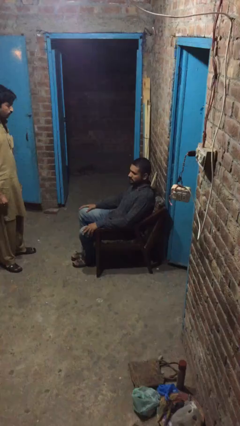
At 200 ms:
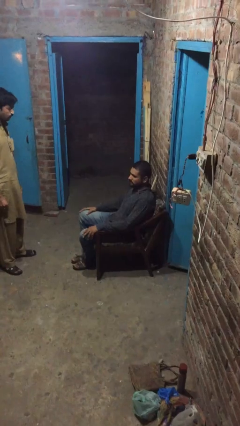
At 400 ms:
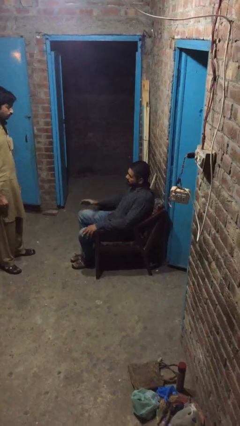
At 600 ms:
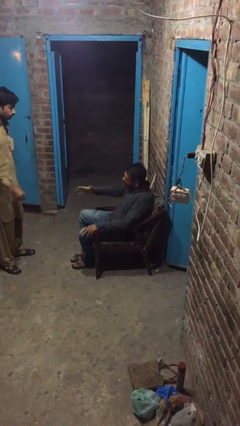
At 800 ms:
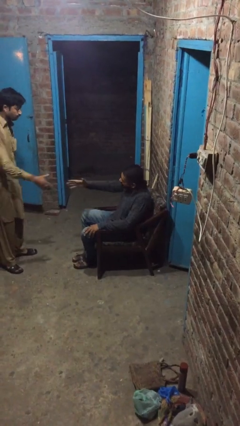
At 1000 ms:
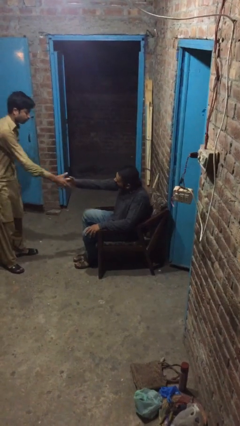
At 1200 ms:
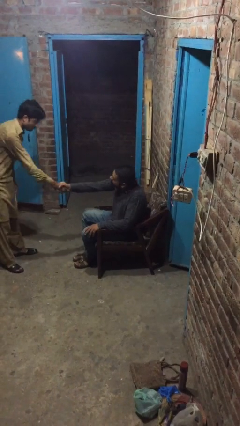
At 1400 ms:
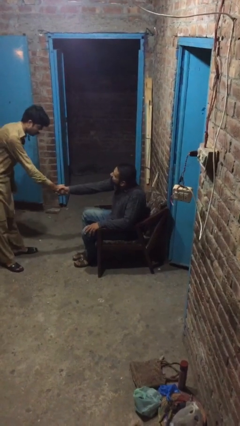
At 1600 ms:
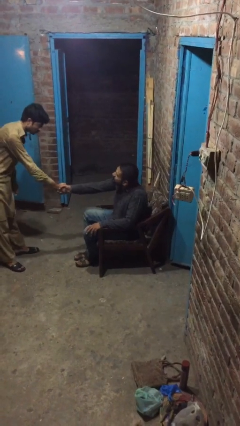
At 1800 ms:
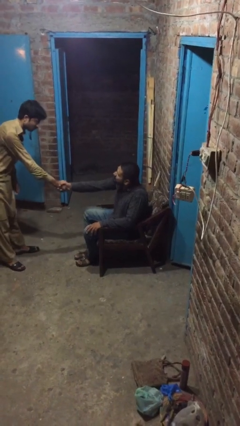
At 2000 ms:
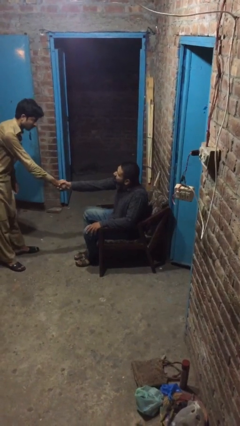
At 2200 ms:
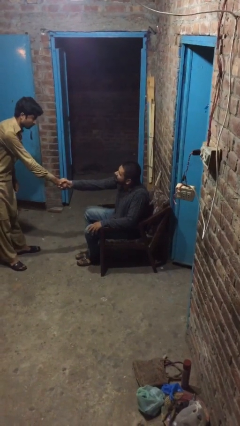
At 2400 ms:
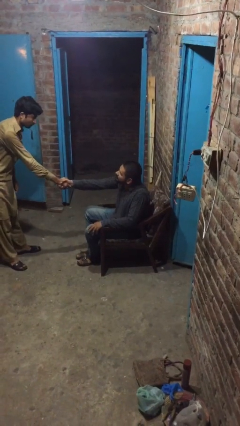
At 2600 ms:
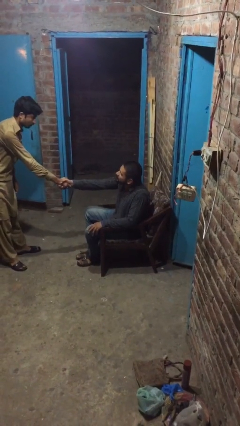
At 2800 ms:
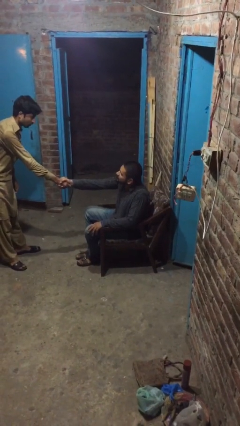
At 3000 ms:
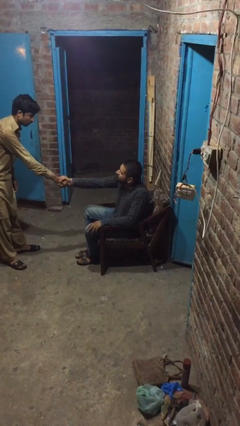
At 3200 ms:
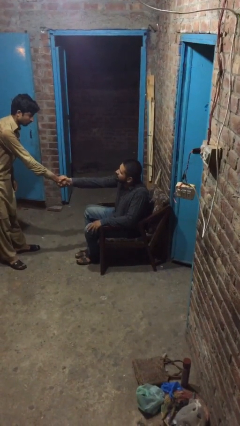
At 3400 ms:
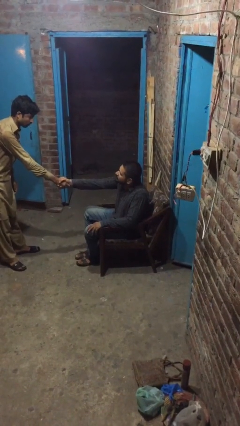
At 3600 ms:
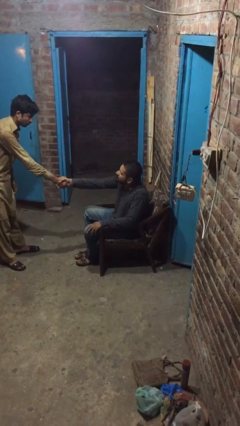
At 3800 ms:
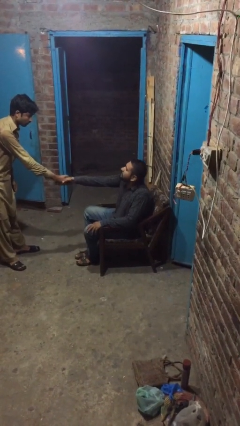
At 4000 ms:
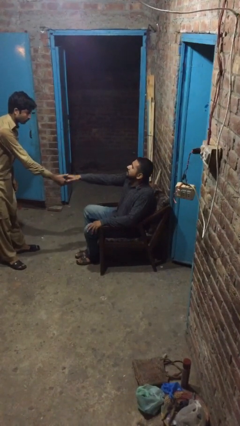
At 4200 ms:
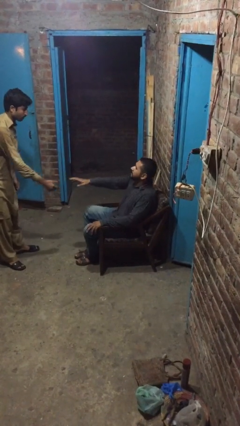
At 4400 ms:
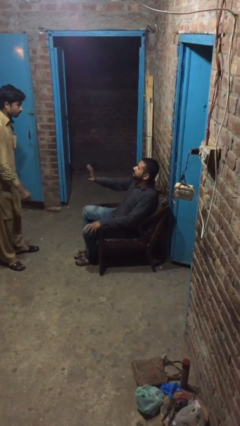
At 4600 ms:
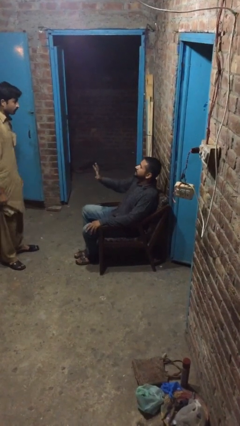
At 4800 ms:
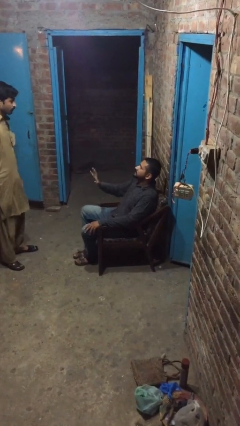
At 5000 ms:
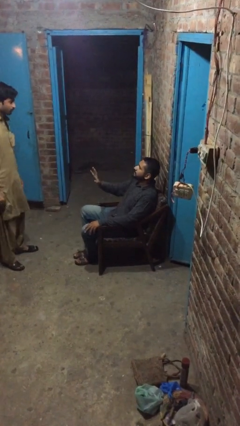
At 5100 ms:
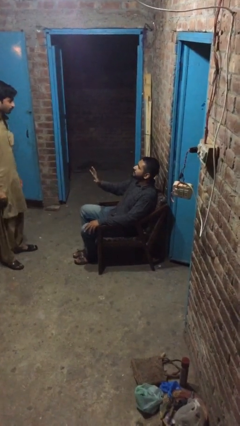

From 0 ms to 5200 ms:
person shakes hand

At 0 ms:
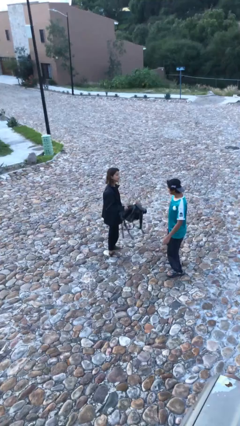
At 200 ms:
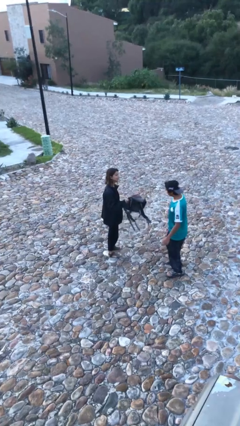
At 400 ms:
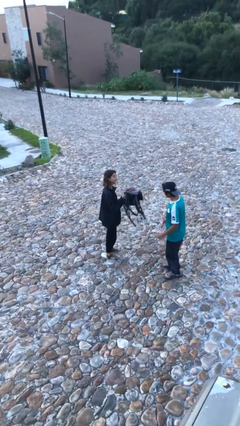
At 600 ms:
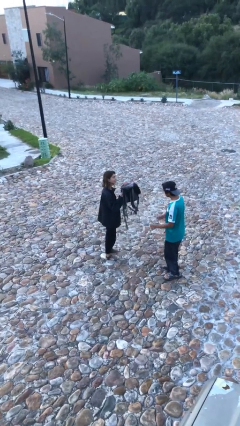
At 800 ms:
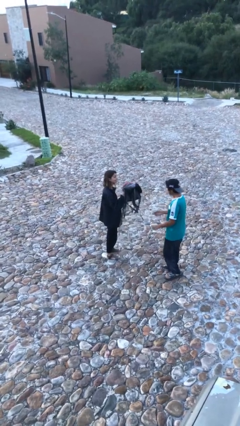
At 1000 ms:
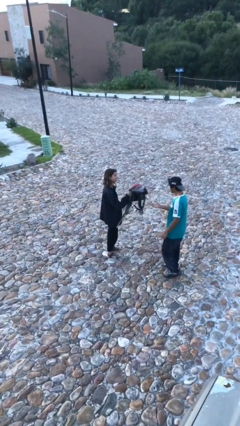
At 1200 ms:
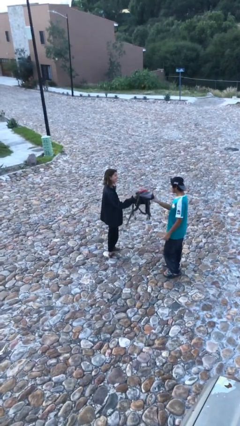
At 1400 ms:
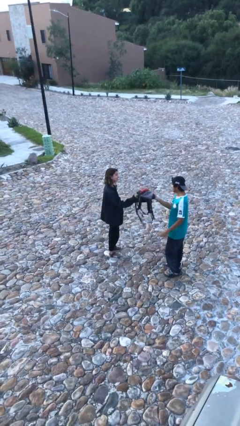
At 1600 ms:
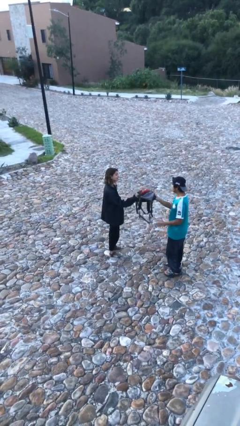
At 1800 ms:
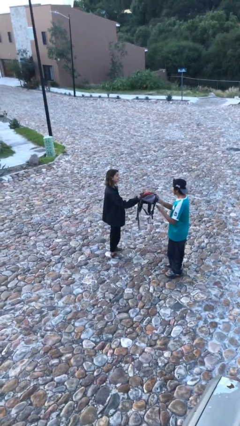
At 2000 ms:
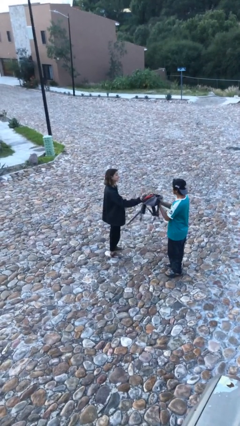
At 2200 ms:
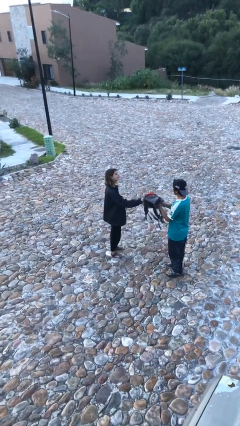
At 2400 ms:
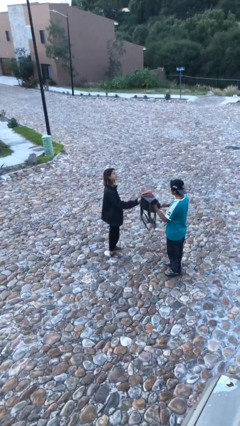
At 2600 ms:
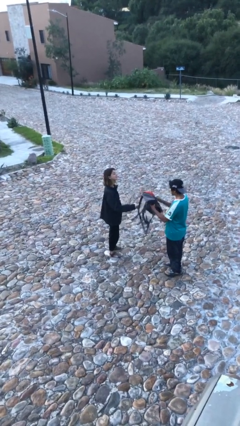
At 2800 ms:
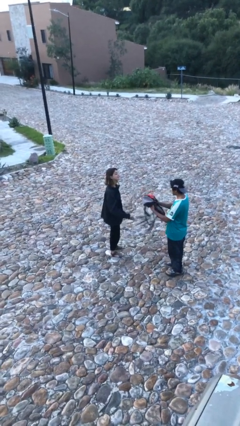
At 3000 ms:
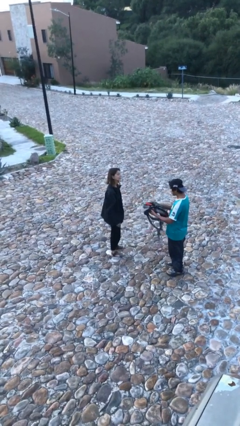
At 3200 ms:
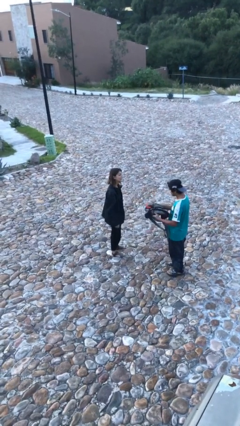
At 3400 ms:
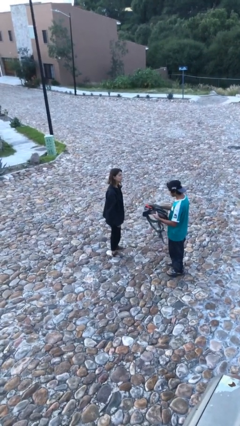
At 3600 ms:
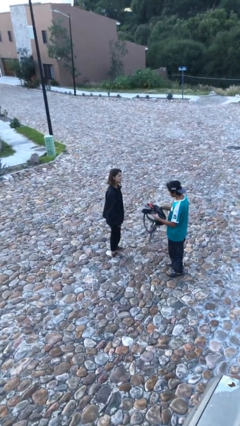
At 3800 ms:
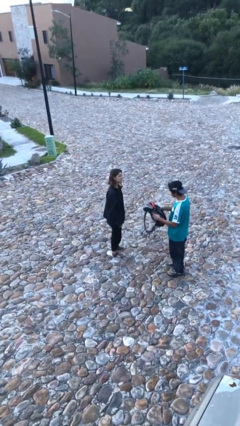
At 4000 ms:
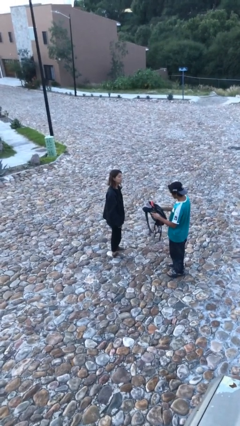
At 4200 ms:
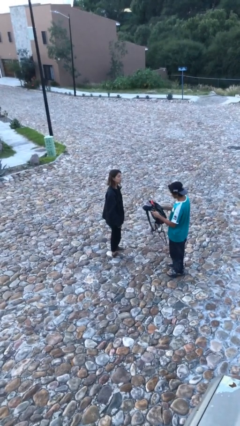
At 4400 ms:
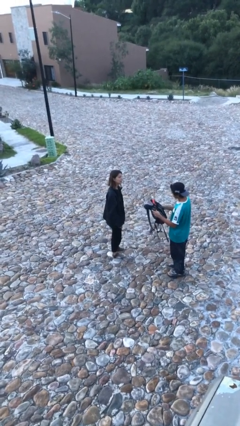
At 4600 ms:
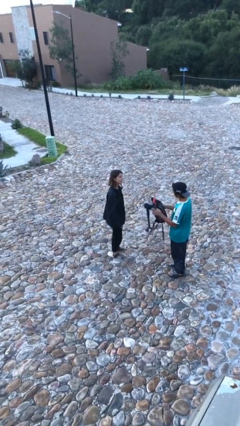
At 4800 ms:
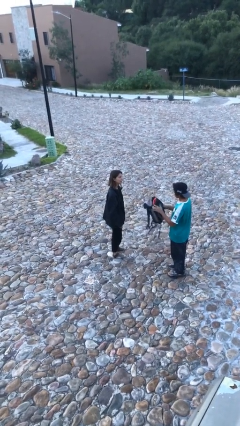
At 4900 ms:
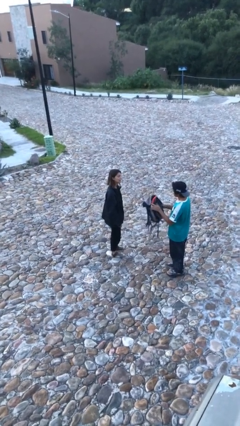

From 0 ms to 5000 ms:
person transfers object to person

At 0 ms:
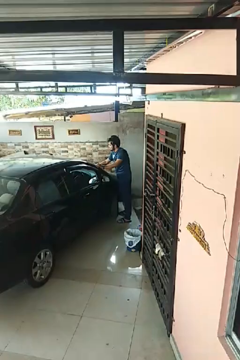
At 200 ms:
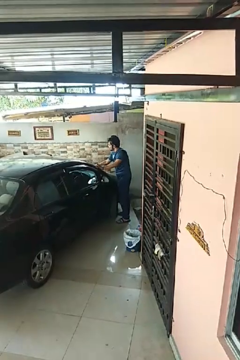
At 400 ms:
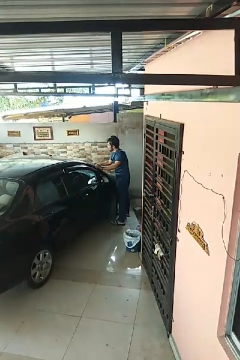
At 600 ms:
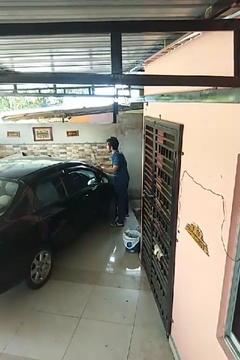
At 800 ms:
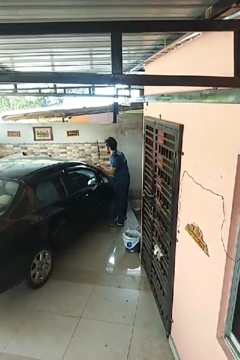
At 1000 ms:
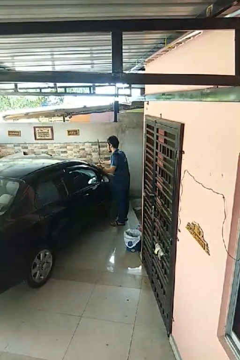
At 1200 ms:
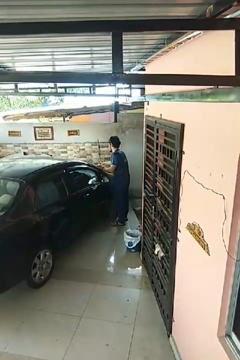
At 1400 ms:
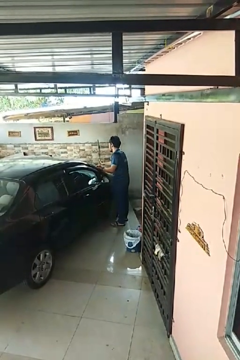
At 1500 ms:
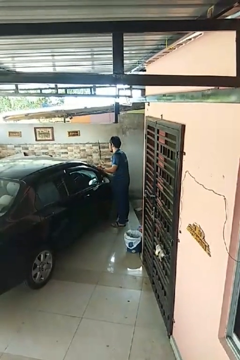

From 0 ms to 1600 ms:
person flips up car wipers

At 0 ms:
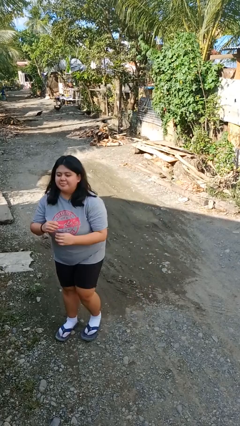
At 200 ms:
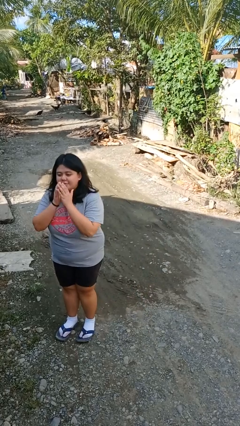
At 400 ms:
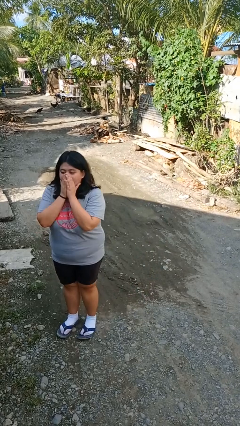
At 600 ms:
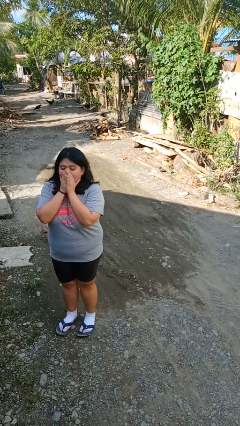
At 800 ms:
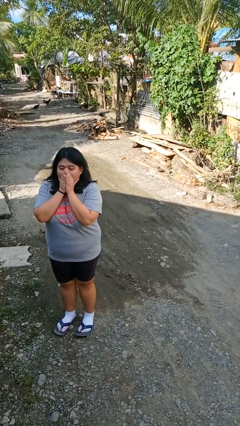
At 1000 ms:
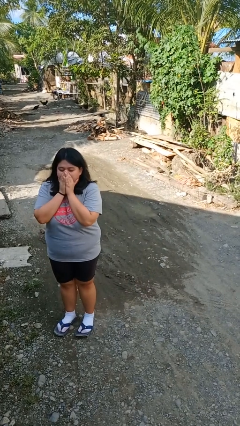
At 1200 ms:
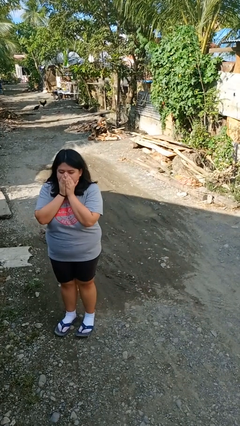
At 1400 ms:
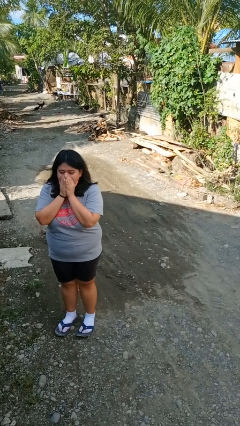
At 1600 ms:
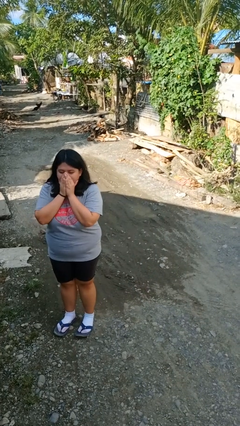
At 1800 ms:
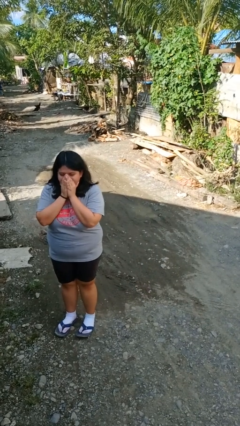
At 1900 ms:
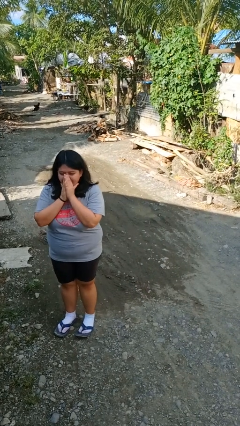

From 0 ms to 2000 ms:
person blows into hands

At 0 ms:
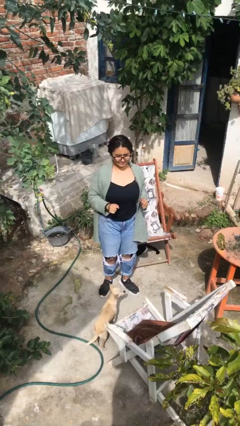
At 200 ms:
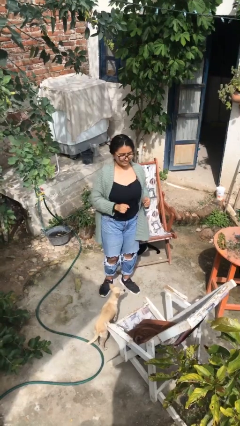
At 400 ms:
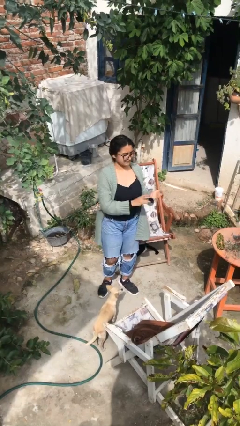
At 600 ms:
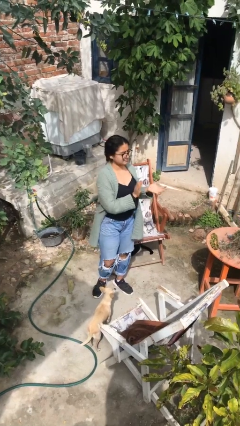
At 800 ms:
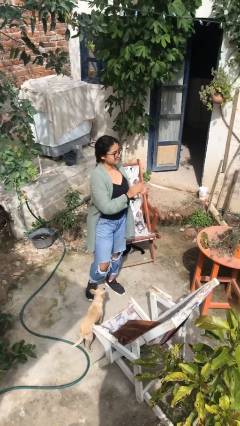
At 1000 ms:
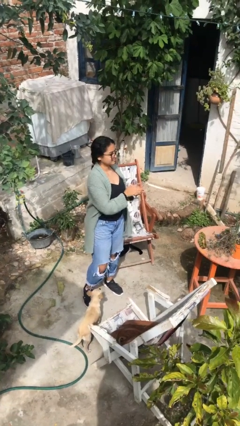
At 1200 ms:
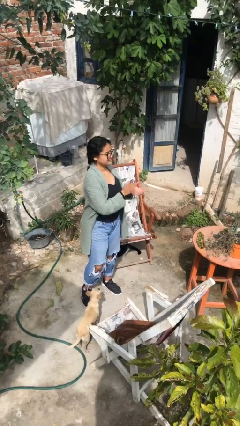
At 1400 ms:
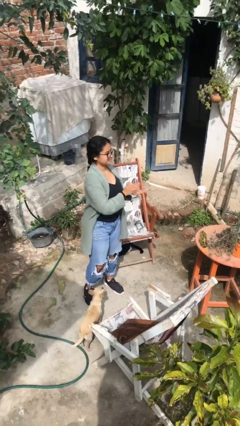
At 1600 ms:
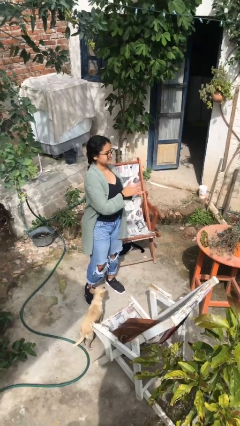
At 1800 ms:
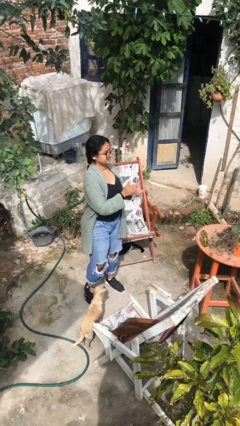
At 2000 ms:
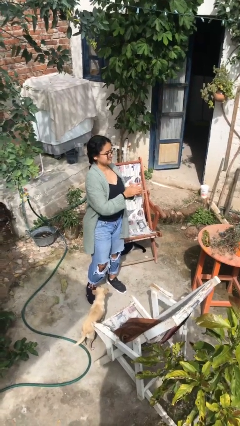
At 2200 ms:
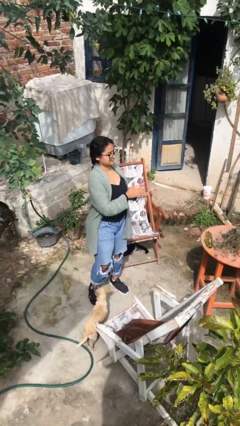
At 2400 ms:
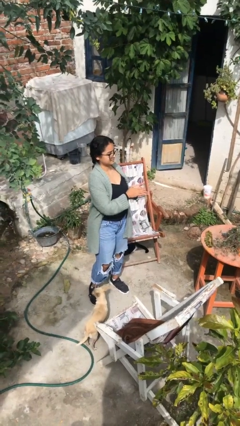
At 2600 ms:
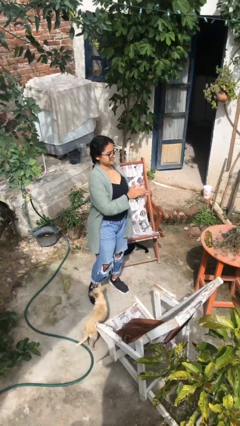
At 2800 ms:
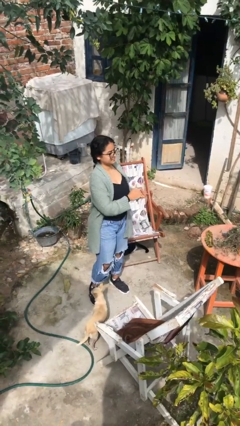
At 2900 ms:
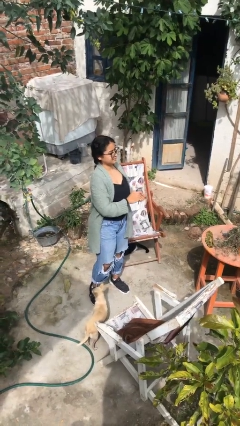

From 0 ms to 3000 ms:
person claps hands

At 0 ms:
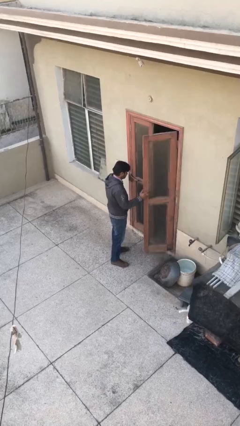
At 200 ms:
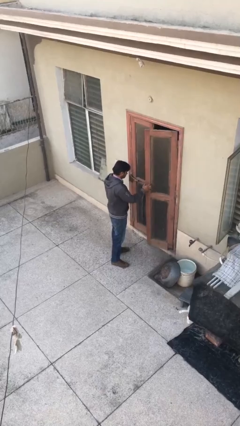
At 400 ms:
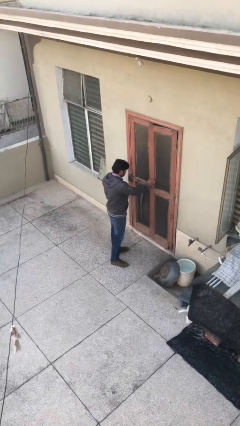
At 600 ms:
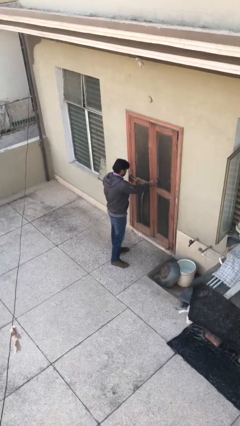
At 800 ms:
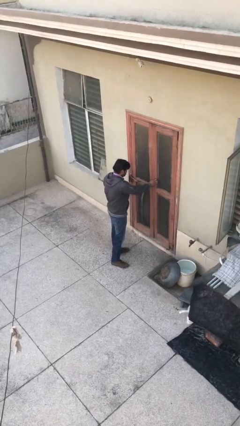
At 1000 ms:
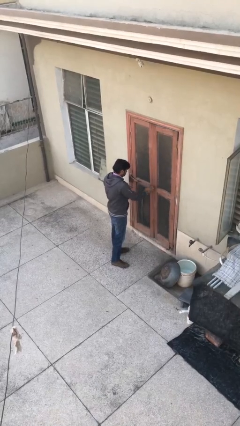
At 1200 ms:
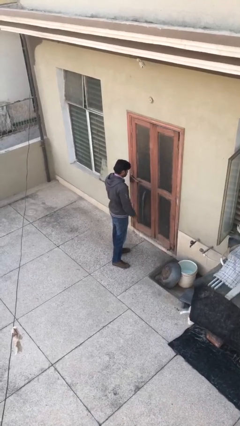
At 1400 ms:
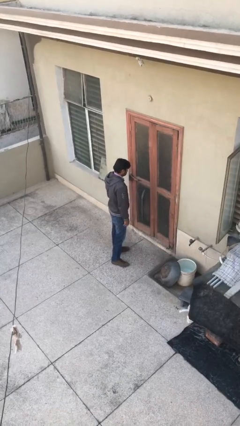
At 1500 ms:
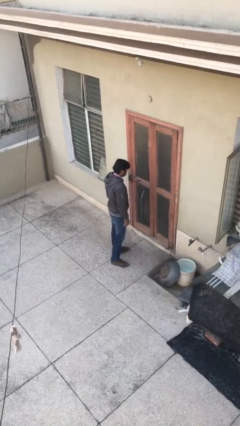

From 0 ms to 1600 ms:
person closes facility door
